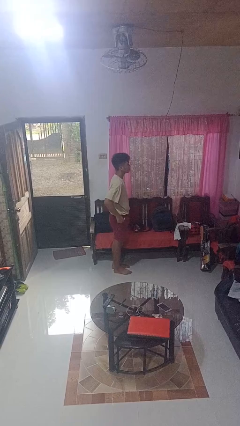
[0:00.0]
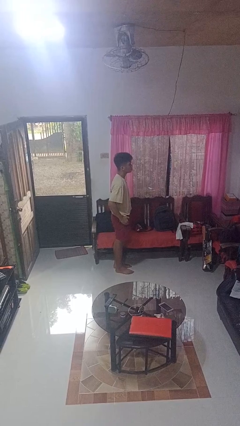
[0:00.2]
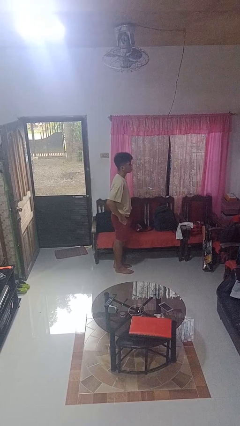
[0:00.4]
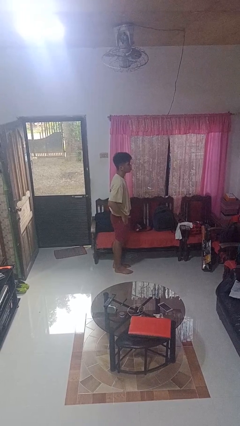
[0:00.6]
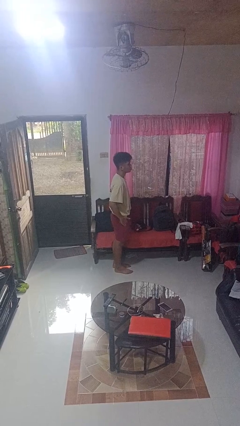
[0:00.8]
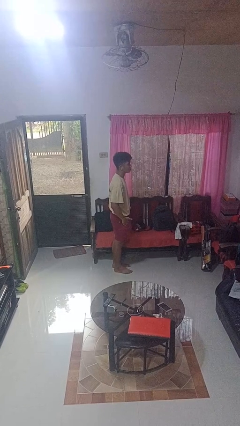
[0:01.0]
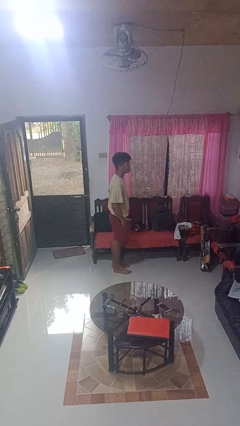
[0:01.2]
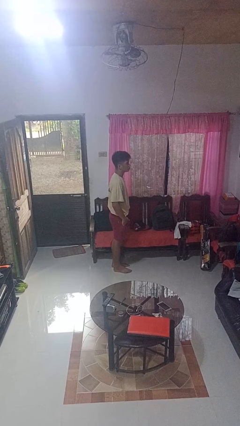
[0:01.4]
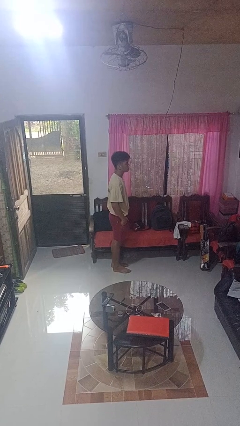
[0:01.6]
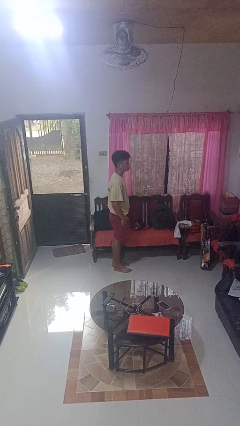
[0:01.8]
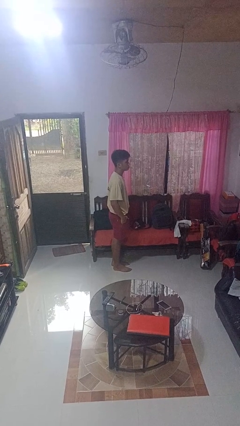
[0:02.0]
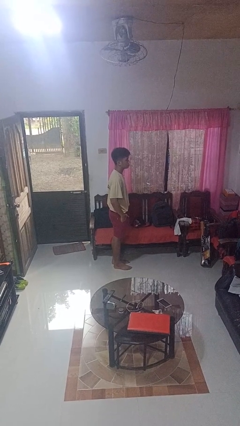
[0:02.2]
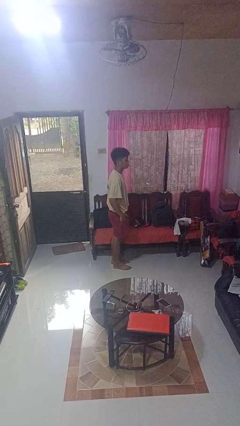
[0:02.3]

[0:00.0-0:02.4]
person puts hands in back pockets

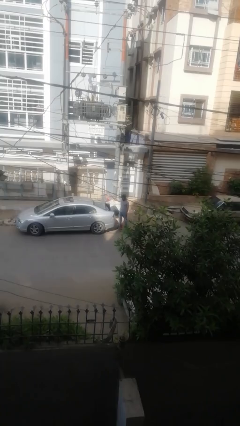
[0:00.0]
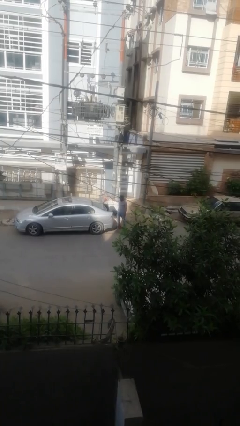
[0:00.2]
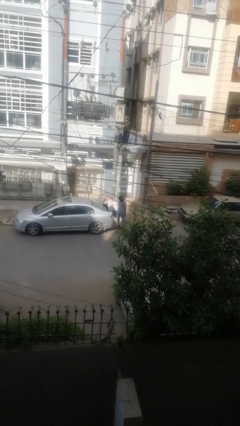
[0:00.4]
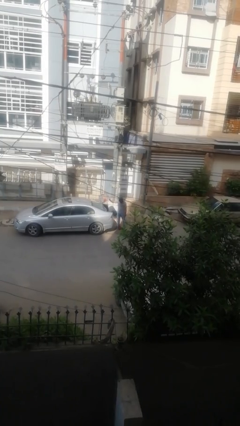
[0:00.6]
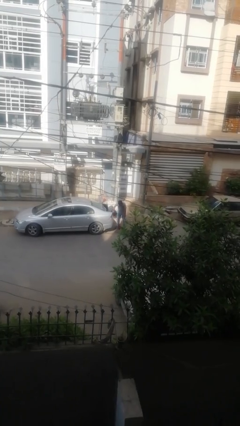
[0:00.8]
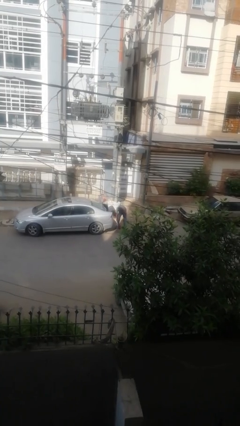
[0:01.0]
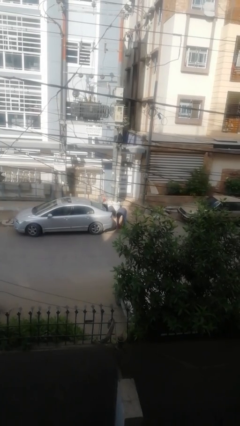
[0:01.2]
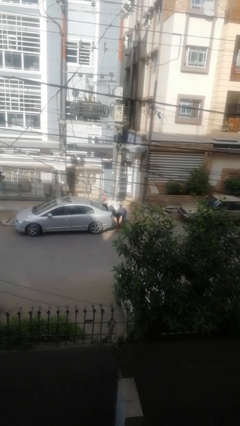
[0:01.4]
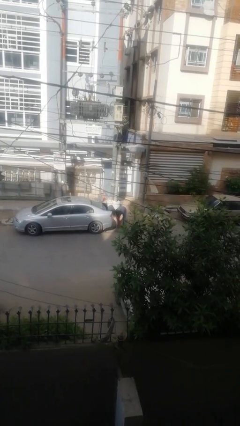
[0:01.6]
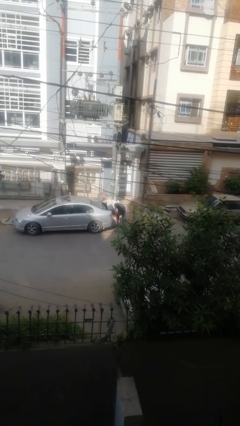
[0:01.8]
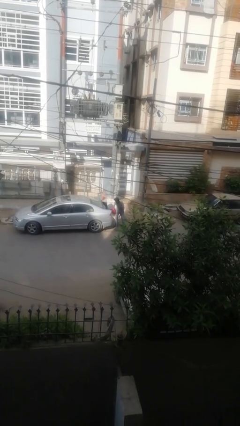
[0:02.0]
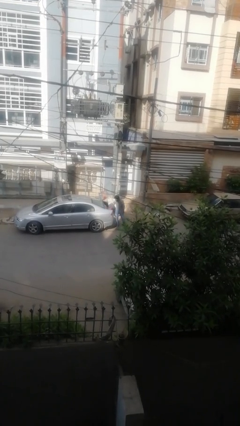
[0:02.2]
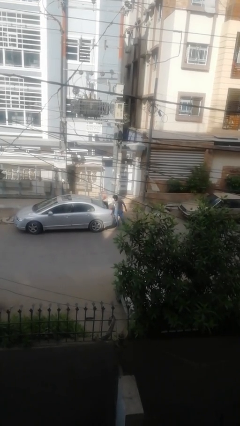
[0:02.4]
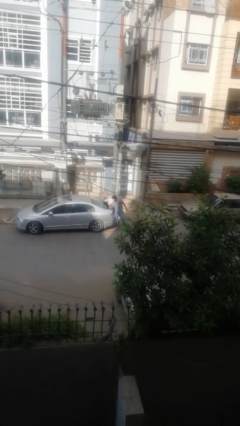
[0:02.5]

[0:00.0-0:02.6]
person exits car

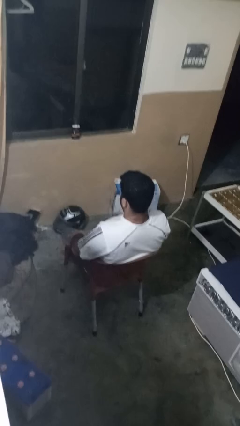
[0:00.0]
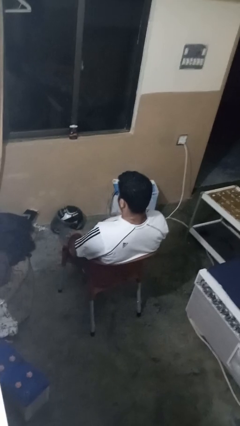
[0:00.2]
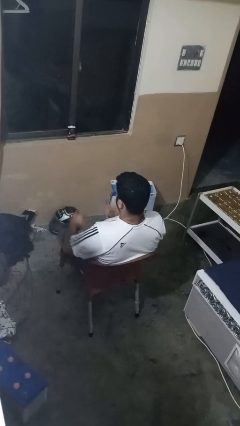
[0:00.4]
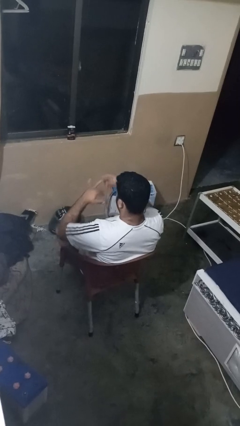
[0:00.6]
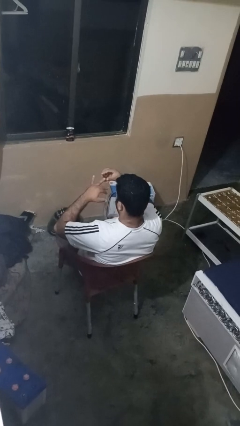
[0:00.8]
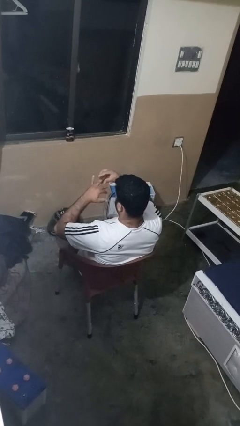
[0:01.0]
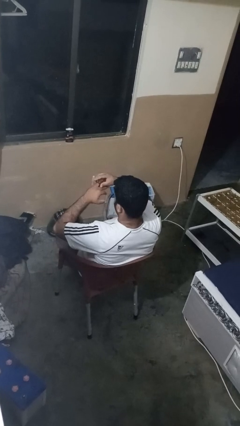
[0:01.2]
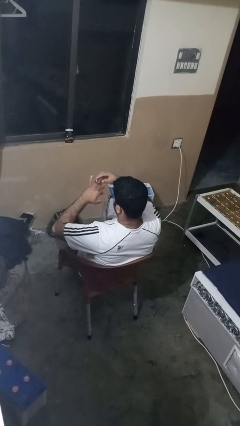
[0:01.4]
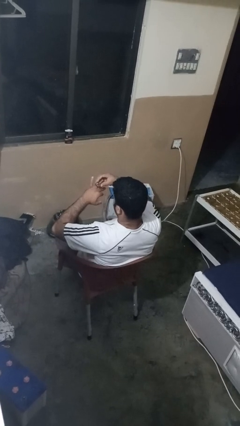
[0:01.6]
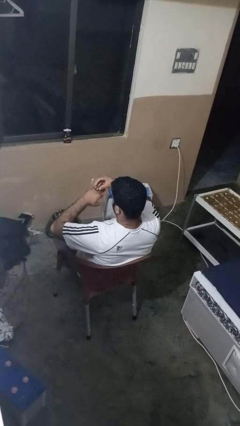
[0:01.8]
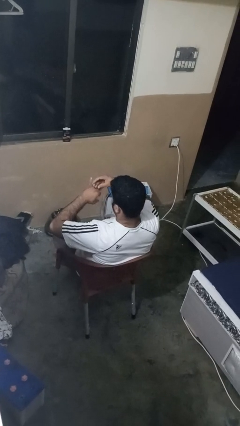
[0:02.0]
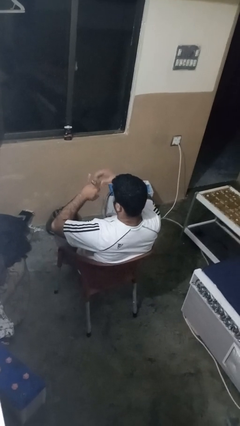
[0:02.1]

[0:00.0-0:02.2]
person puts on ring

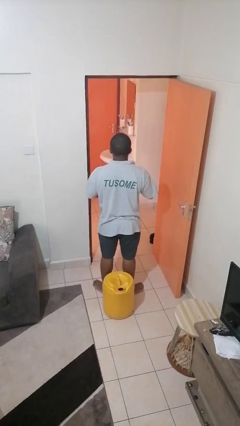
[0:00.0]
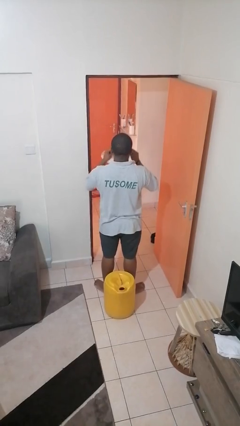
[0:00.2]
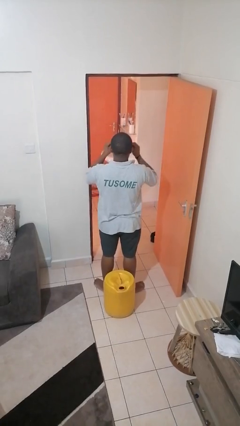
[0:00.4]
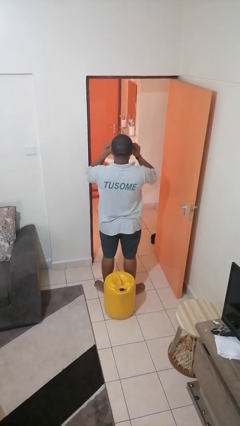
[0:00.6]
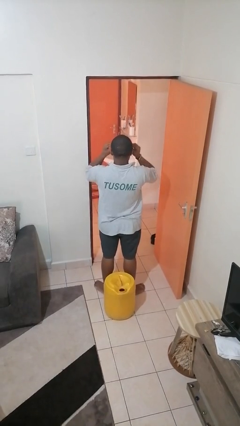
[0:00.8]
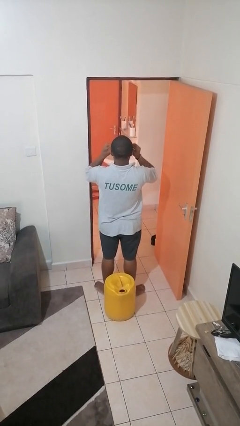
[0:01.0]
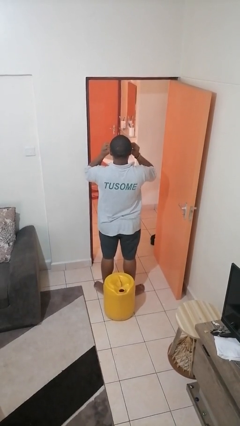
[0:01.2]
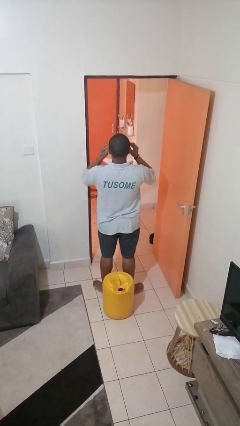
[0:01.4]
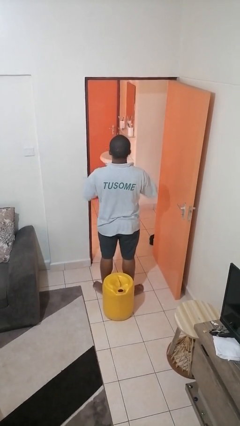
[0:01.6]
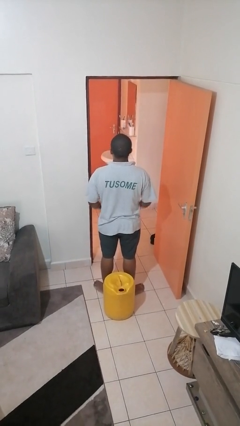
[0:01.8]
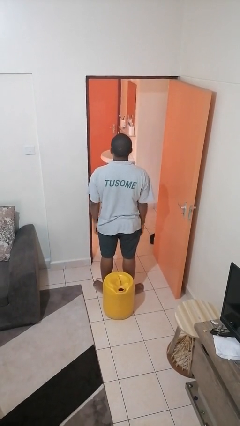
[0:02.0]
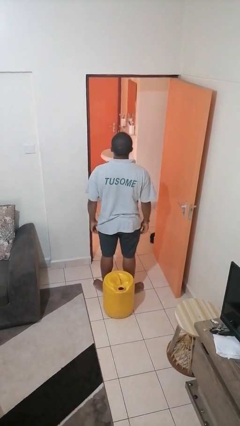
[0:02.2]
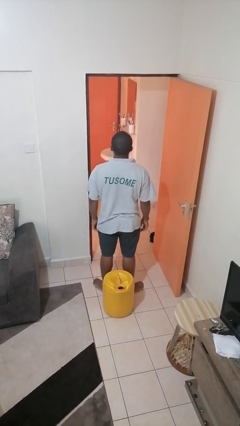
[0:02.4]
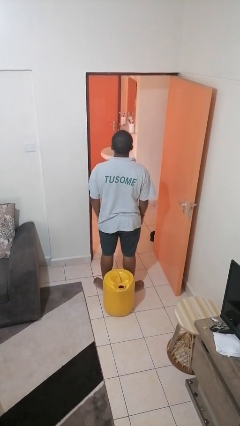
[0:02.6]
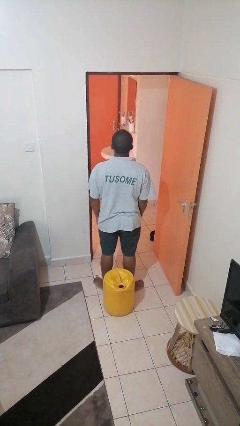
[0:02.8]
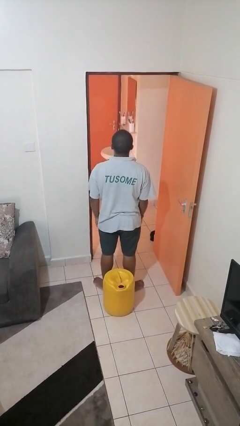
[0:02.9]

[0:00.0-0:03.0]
person puts on glasses

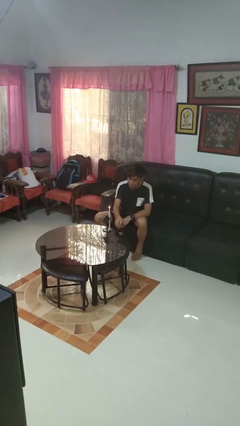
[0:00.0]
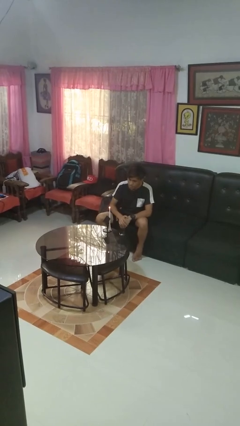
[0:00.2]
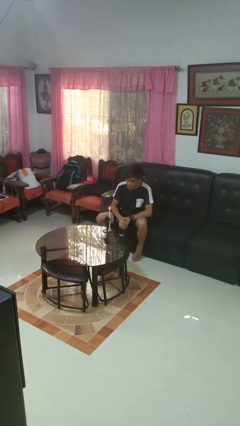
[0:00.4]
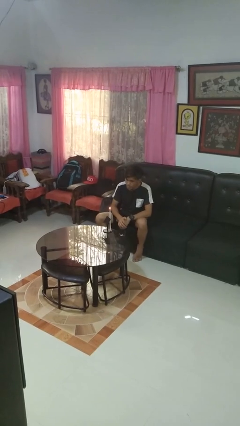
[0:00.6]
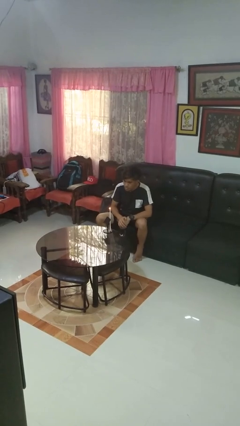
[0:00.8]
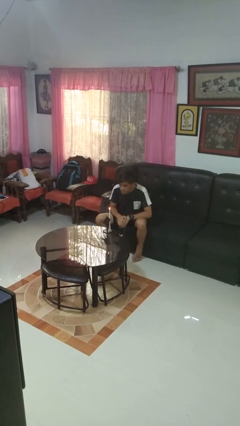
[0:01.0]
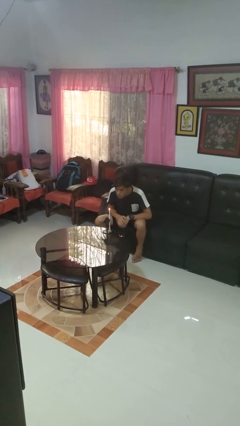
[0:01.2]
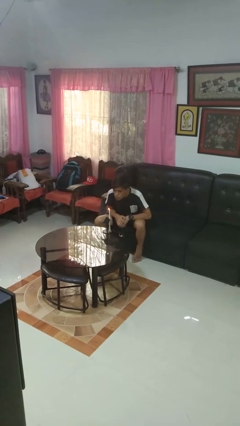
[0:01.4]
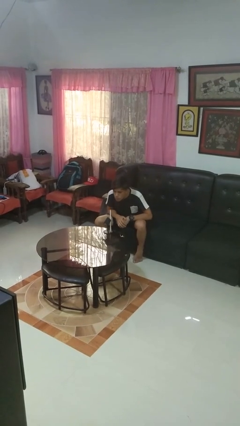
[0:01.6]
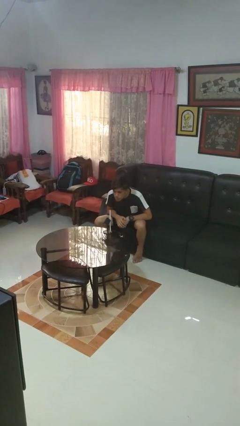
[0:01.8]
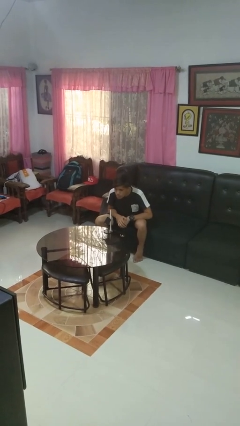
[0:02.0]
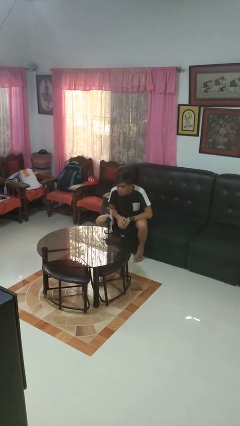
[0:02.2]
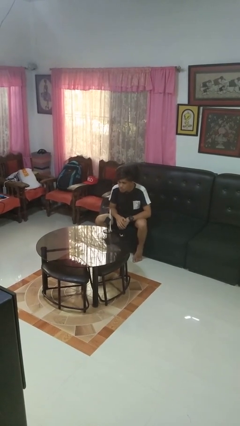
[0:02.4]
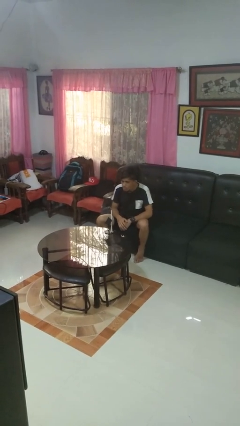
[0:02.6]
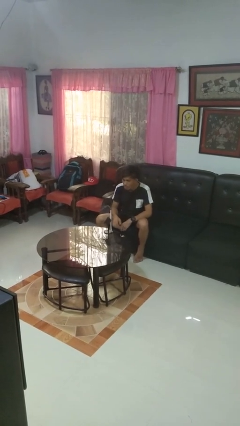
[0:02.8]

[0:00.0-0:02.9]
person extinguishes candle

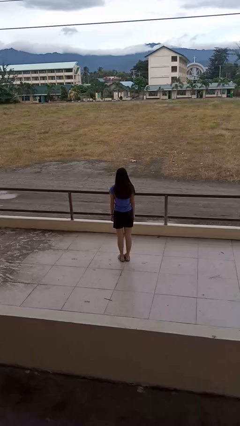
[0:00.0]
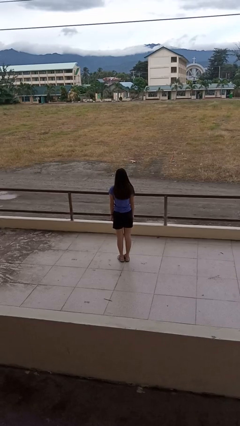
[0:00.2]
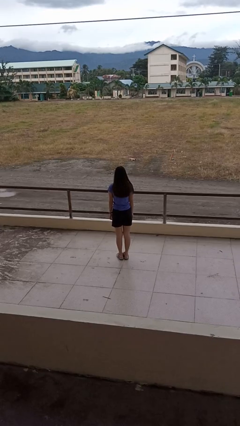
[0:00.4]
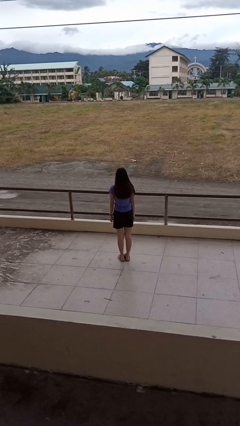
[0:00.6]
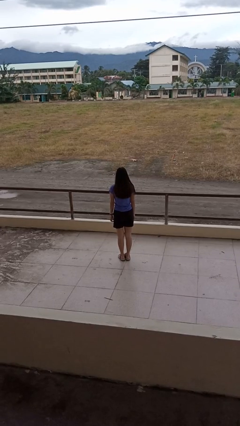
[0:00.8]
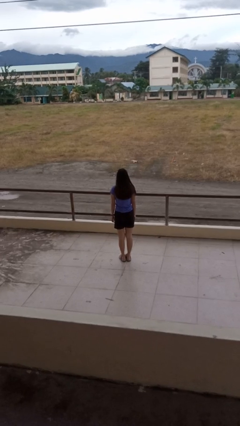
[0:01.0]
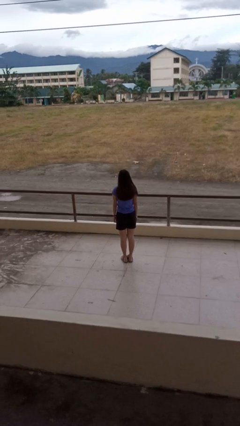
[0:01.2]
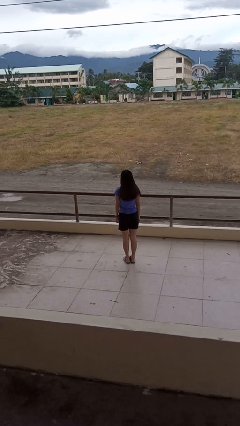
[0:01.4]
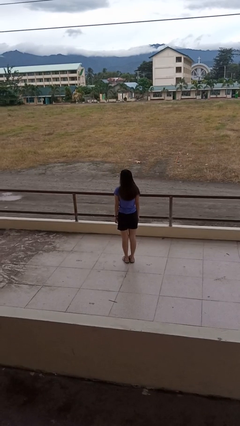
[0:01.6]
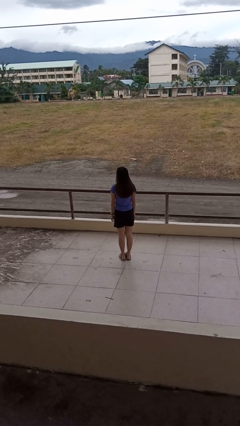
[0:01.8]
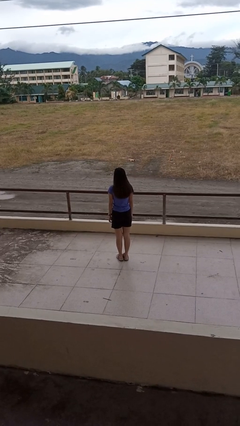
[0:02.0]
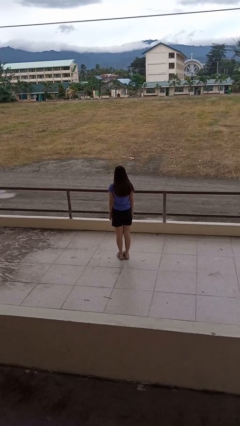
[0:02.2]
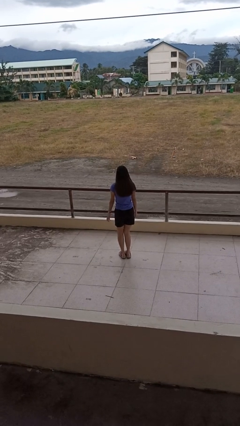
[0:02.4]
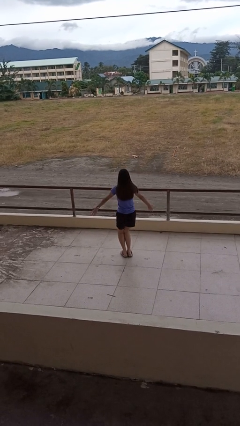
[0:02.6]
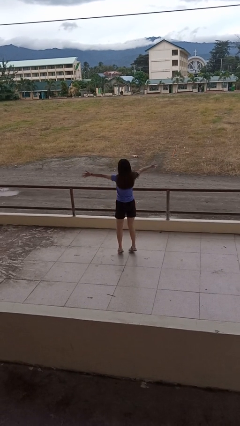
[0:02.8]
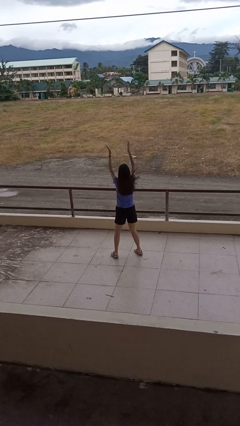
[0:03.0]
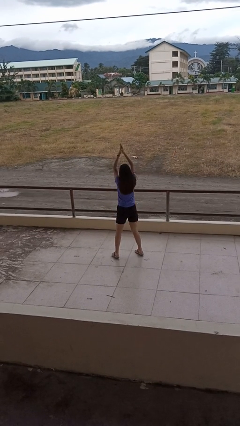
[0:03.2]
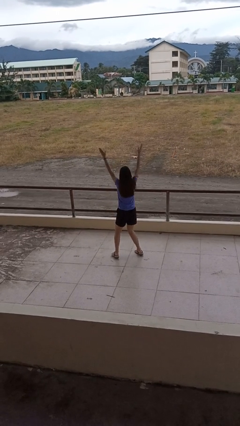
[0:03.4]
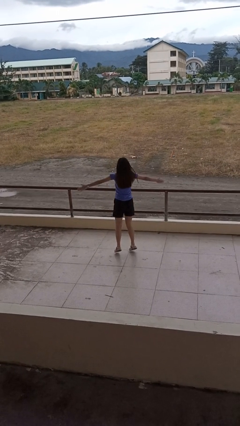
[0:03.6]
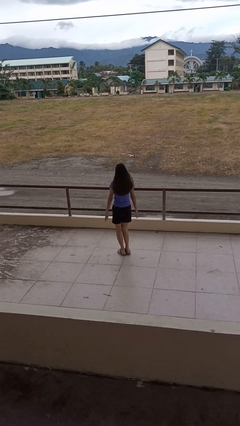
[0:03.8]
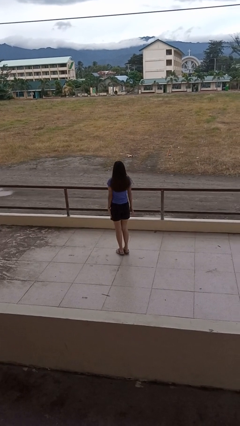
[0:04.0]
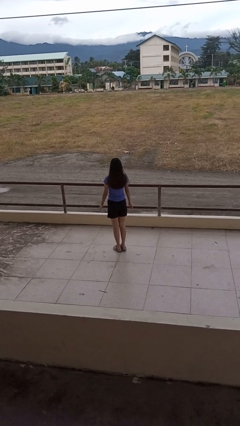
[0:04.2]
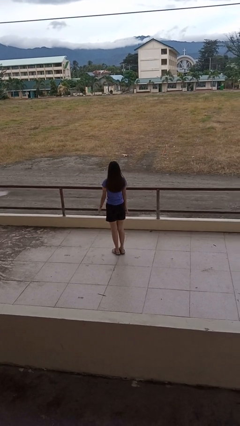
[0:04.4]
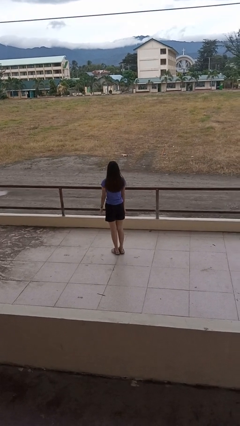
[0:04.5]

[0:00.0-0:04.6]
person exercises with jumping jacks
